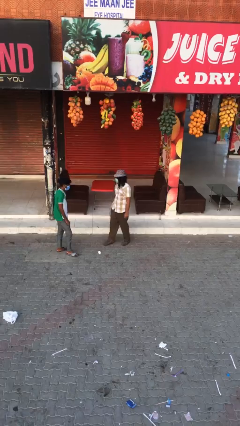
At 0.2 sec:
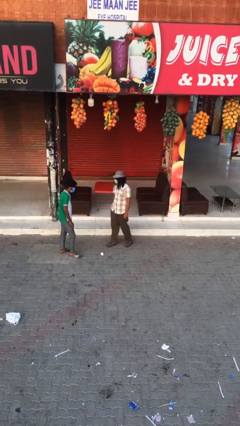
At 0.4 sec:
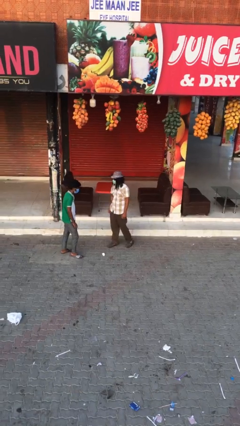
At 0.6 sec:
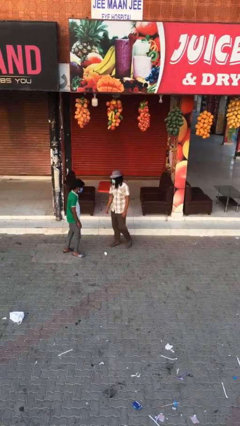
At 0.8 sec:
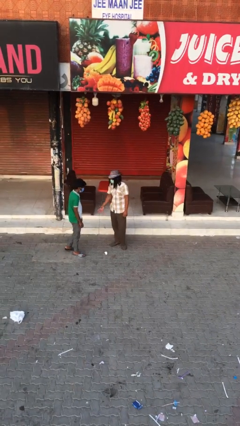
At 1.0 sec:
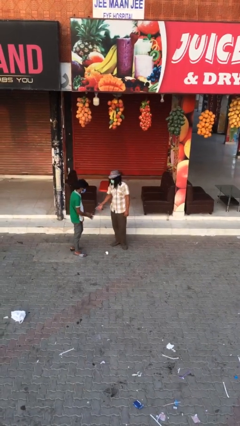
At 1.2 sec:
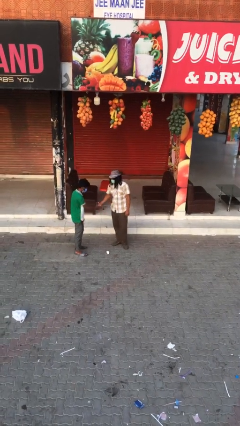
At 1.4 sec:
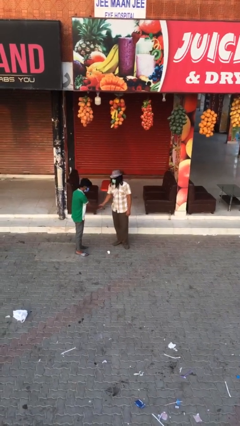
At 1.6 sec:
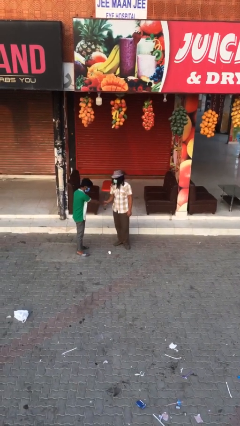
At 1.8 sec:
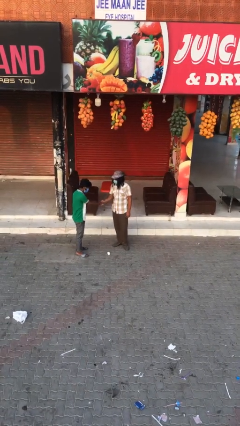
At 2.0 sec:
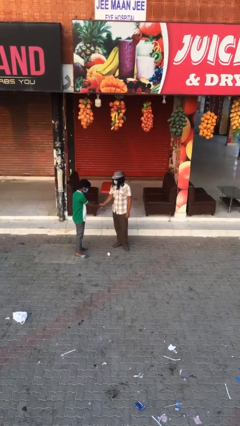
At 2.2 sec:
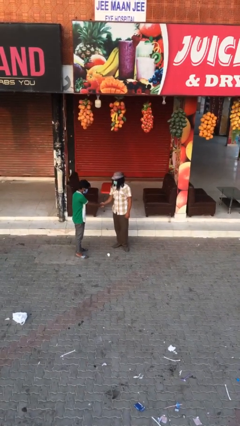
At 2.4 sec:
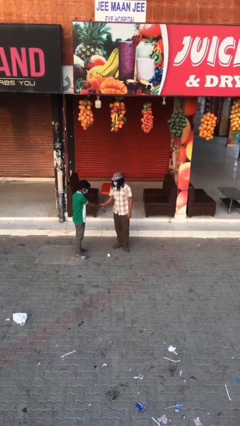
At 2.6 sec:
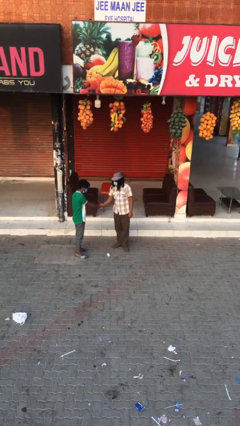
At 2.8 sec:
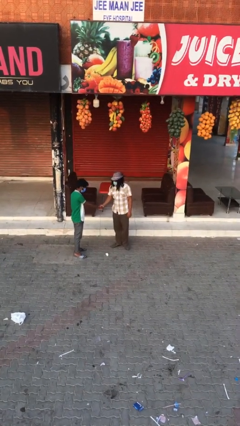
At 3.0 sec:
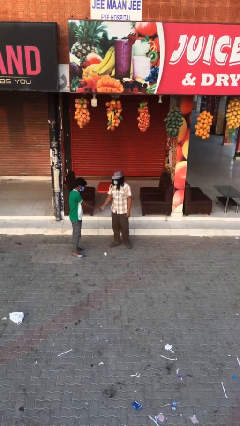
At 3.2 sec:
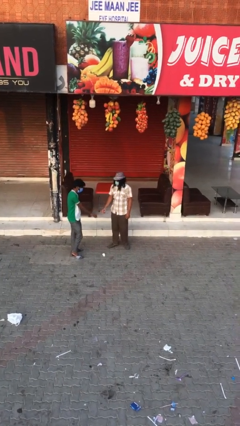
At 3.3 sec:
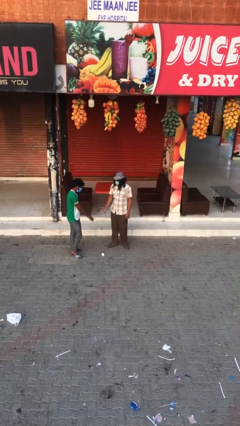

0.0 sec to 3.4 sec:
person shakes hand

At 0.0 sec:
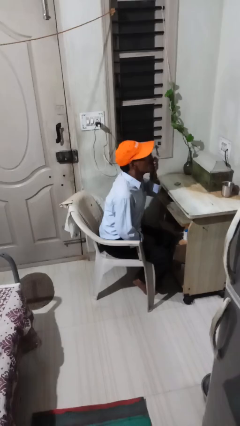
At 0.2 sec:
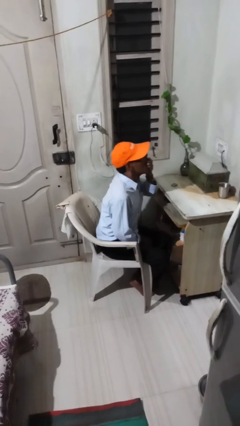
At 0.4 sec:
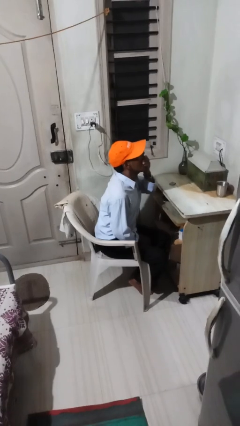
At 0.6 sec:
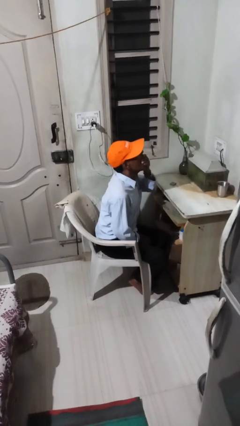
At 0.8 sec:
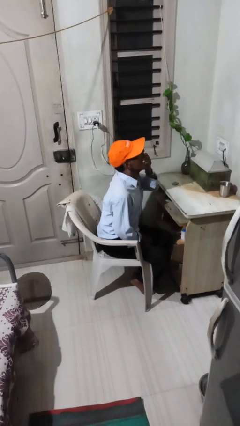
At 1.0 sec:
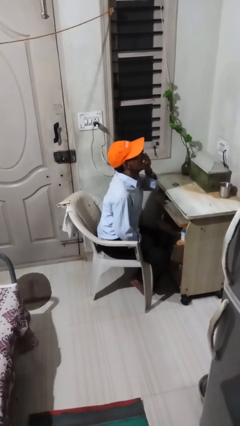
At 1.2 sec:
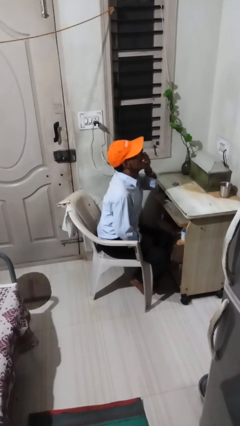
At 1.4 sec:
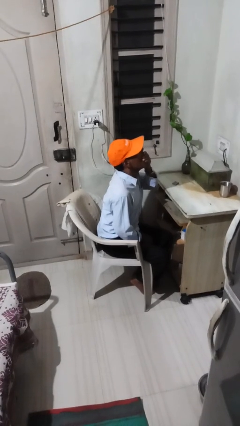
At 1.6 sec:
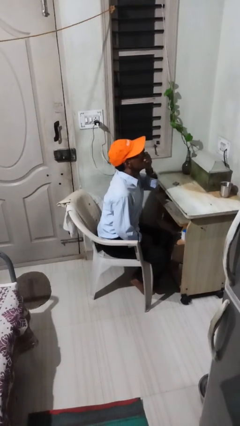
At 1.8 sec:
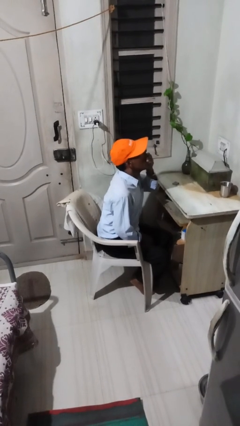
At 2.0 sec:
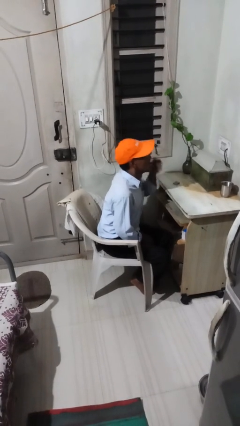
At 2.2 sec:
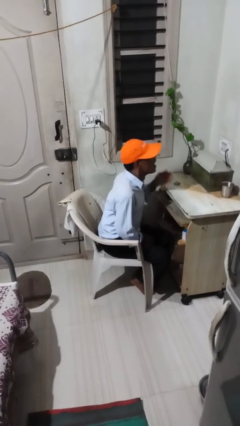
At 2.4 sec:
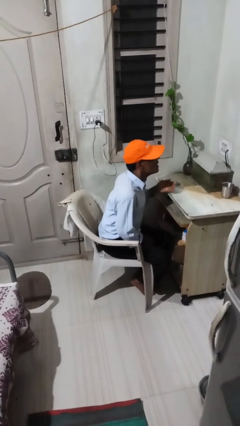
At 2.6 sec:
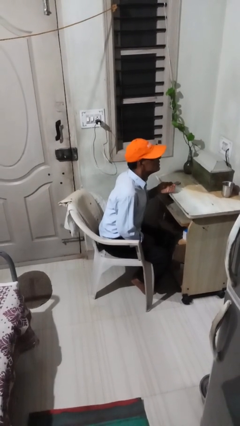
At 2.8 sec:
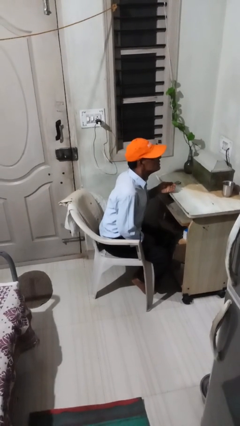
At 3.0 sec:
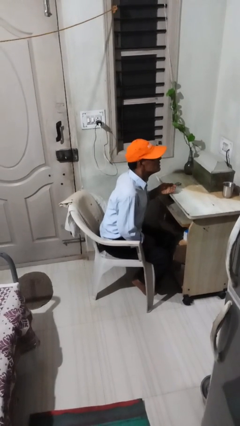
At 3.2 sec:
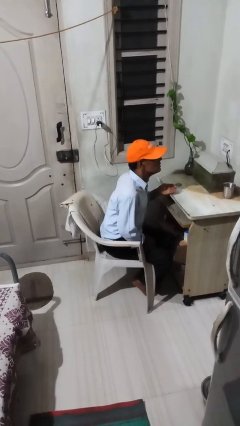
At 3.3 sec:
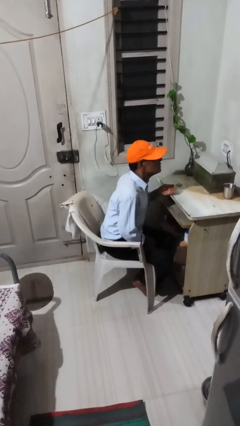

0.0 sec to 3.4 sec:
person yawns

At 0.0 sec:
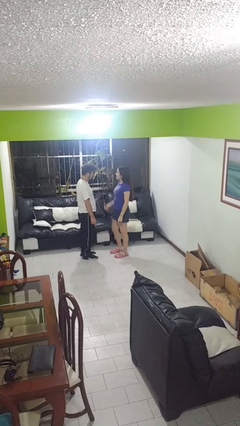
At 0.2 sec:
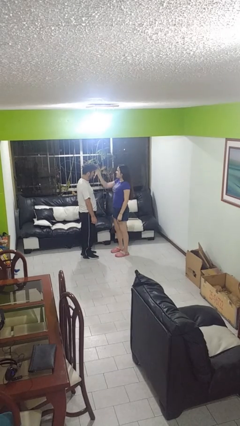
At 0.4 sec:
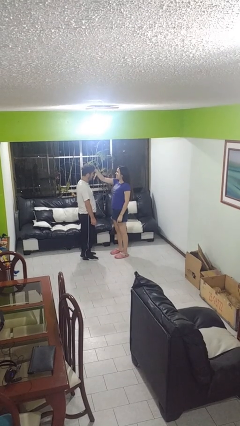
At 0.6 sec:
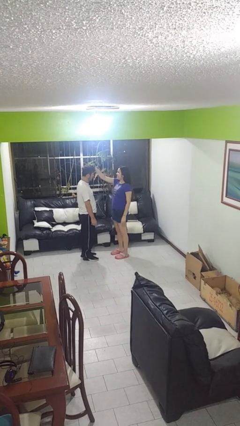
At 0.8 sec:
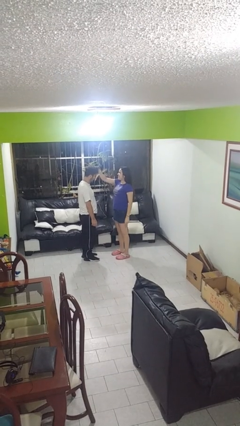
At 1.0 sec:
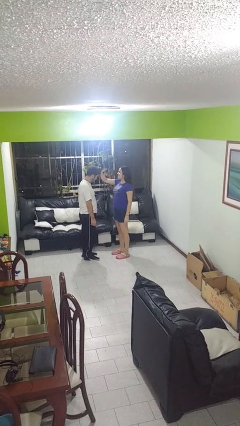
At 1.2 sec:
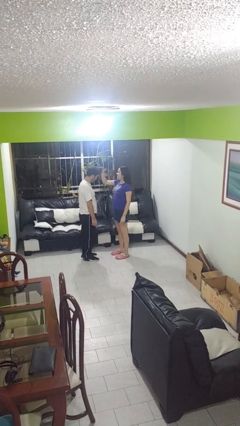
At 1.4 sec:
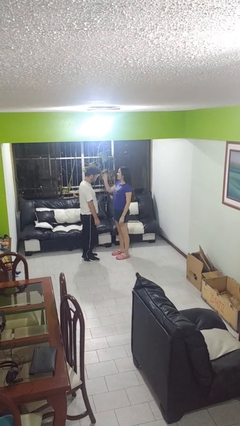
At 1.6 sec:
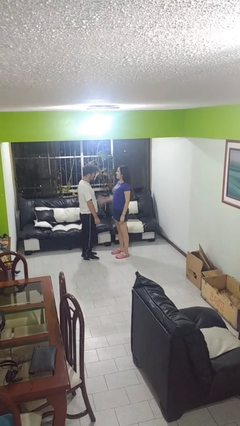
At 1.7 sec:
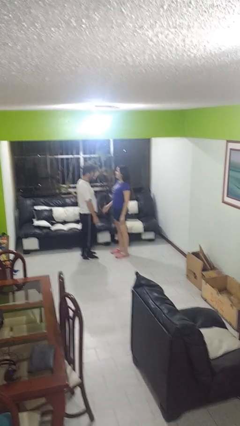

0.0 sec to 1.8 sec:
person grabs person by hair

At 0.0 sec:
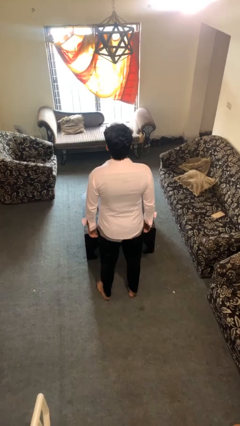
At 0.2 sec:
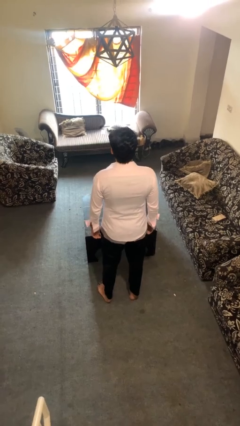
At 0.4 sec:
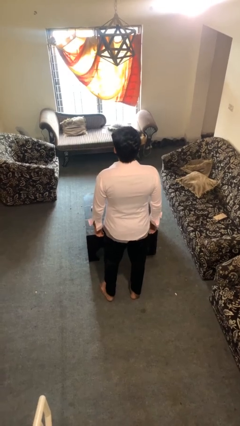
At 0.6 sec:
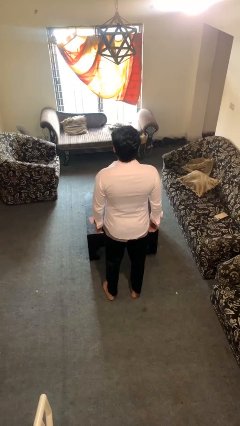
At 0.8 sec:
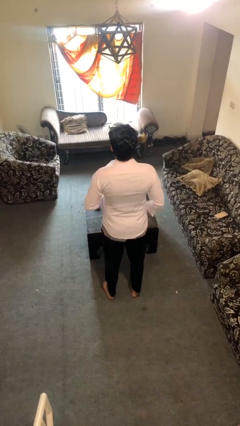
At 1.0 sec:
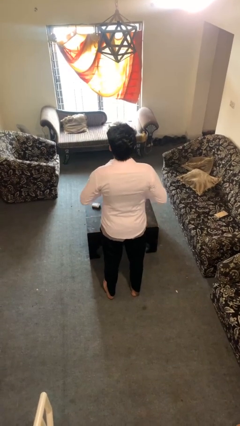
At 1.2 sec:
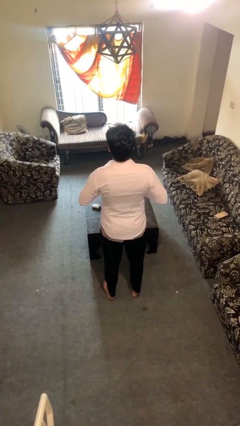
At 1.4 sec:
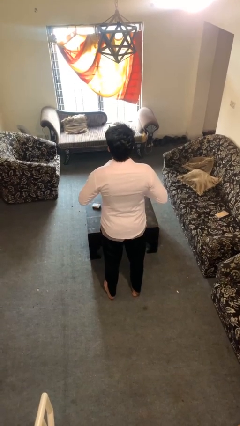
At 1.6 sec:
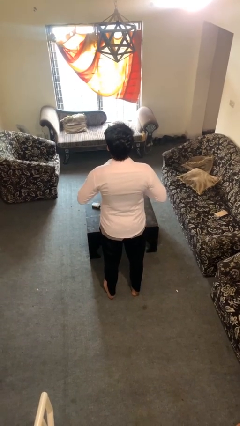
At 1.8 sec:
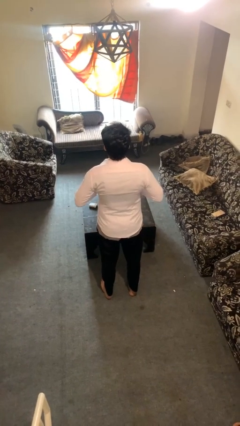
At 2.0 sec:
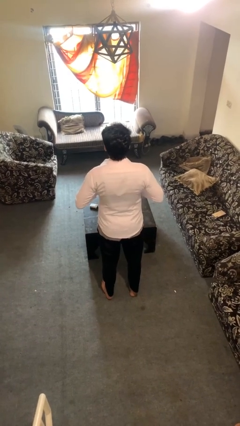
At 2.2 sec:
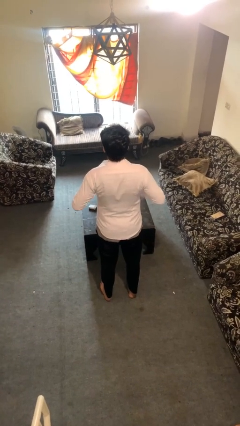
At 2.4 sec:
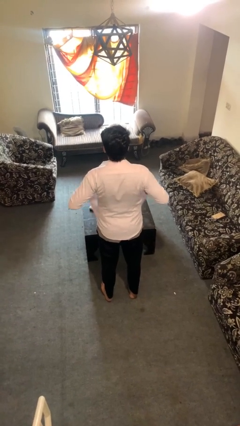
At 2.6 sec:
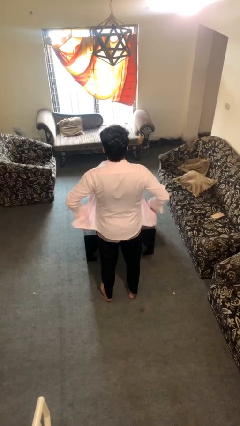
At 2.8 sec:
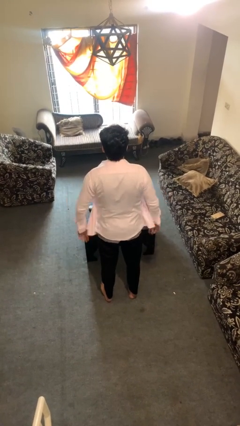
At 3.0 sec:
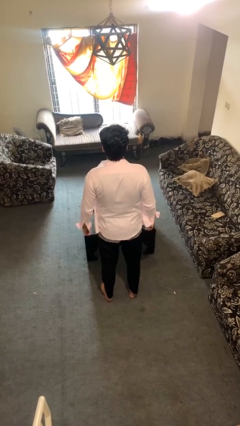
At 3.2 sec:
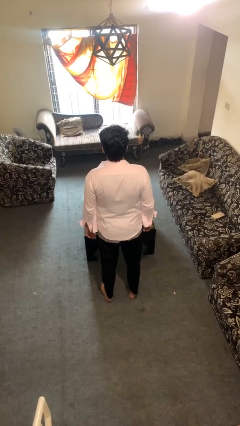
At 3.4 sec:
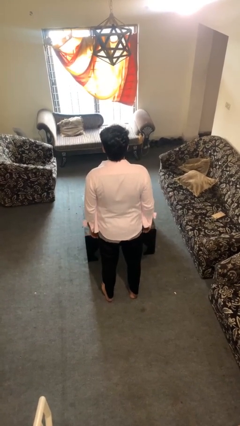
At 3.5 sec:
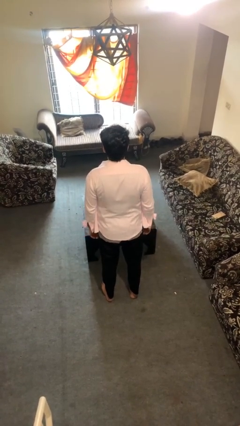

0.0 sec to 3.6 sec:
person unbuttons shirt

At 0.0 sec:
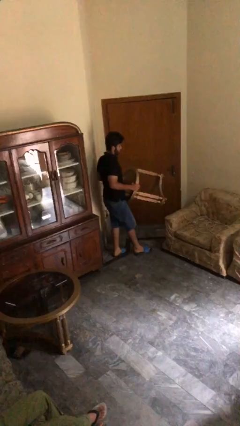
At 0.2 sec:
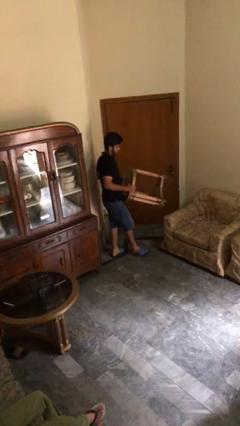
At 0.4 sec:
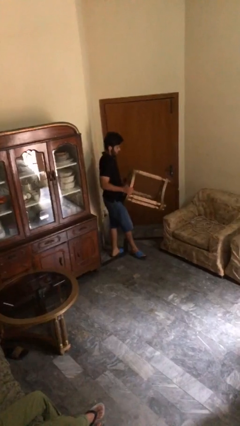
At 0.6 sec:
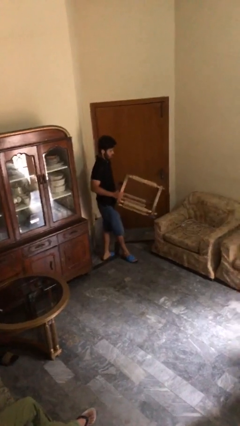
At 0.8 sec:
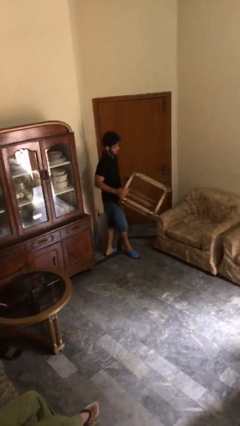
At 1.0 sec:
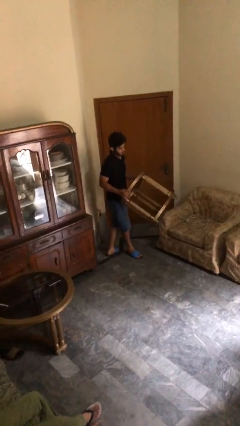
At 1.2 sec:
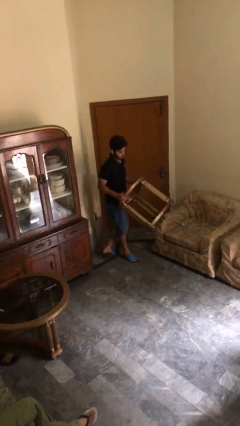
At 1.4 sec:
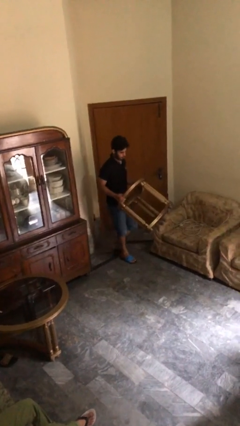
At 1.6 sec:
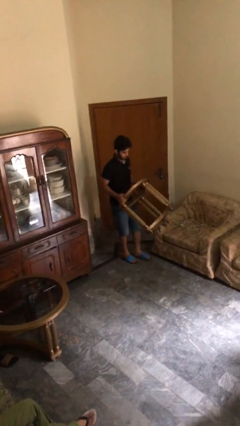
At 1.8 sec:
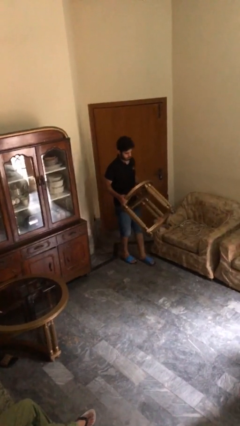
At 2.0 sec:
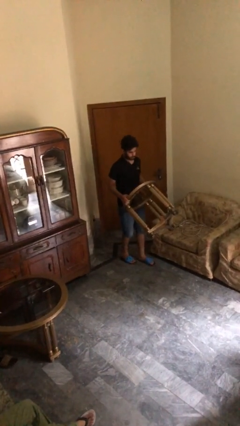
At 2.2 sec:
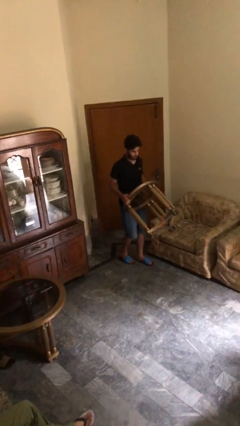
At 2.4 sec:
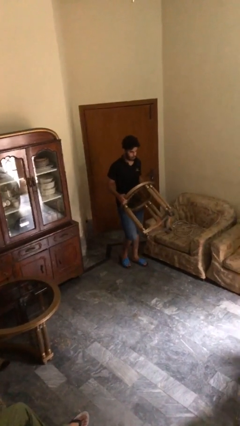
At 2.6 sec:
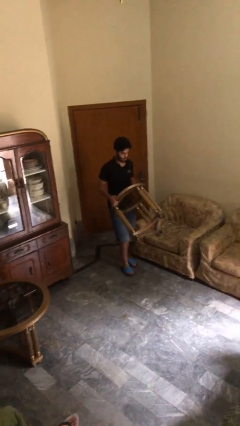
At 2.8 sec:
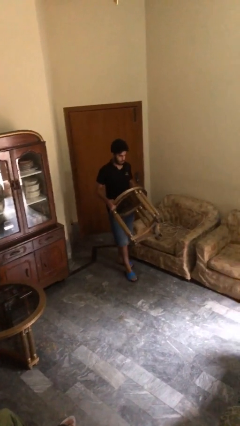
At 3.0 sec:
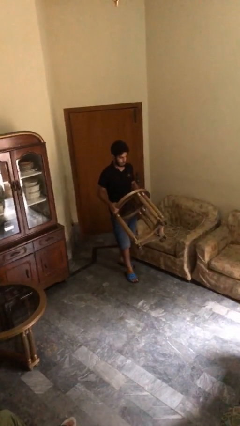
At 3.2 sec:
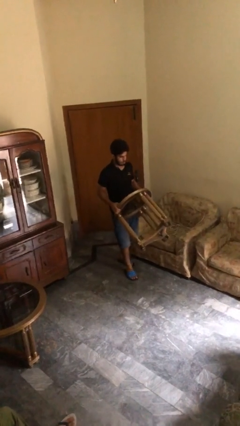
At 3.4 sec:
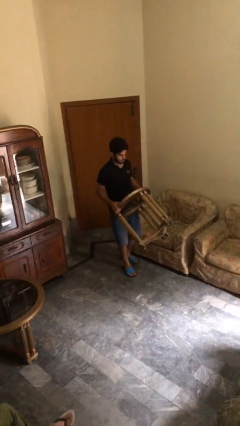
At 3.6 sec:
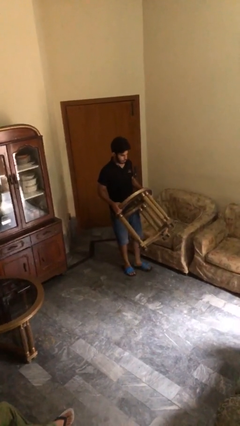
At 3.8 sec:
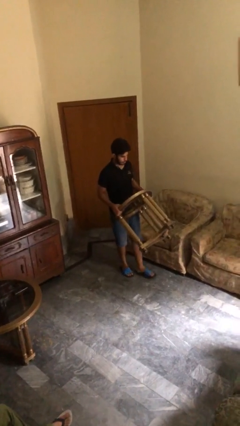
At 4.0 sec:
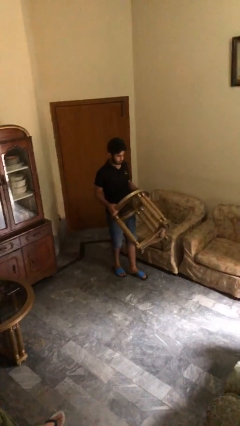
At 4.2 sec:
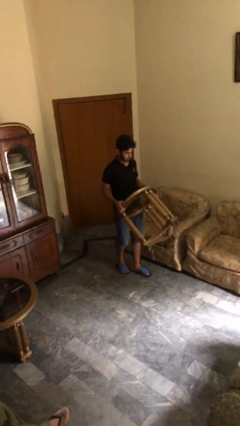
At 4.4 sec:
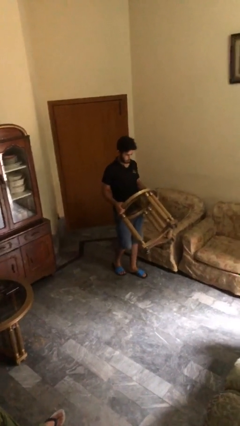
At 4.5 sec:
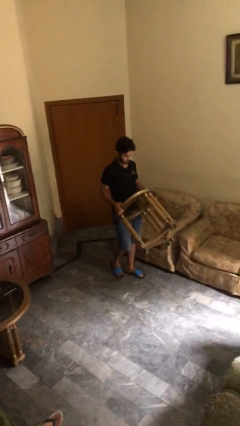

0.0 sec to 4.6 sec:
person carries heavy object

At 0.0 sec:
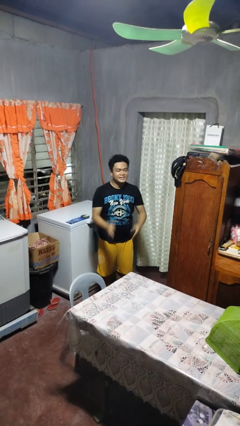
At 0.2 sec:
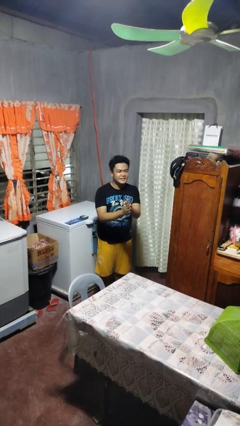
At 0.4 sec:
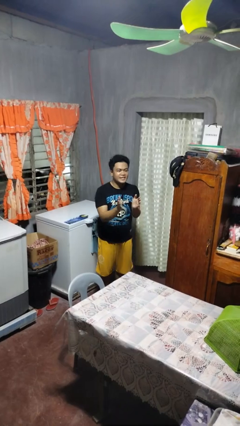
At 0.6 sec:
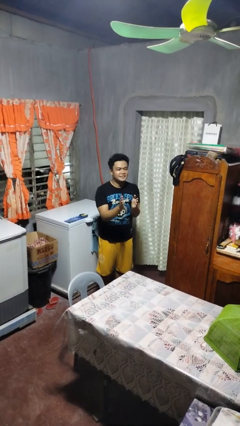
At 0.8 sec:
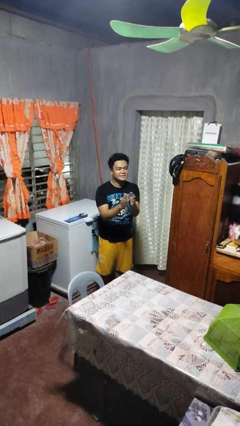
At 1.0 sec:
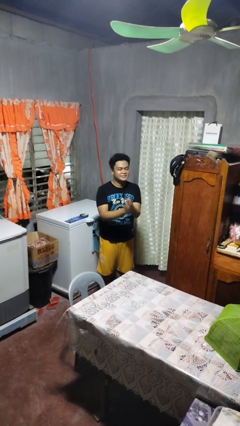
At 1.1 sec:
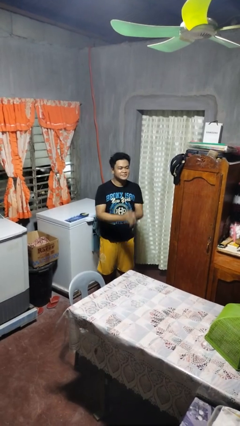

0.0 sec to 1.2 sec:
person claps hands
